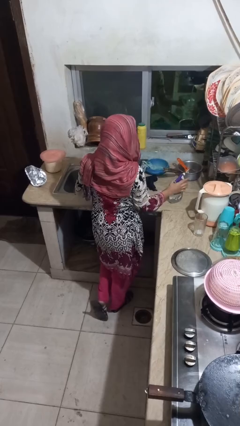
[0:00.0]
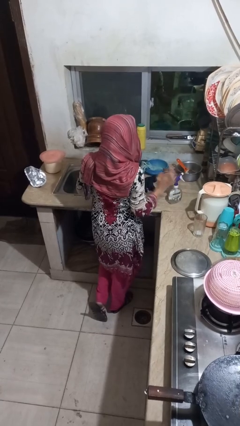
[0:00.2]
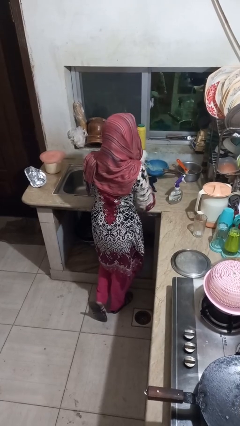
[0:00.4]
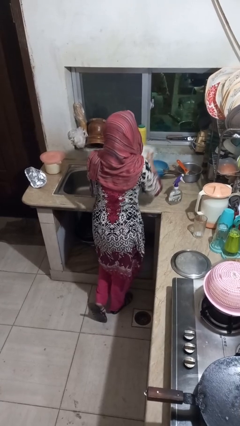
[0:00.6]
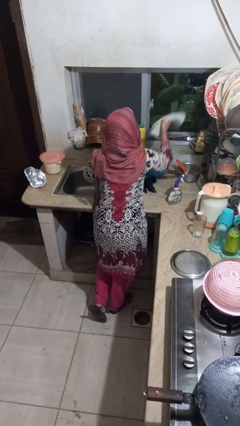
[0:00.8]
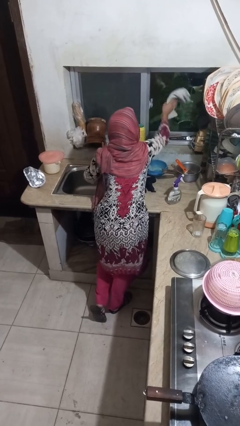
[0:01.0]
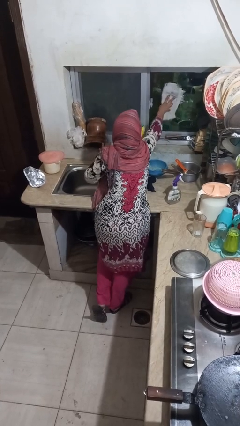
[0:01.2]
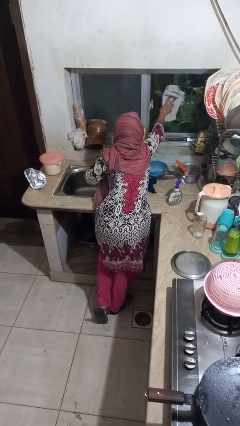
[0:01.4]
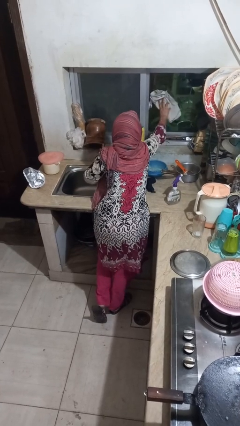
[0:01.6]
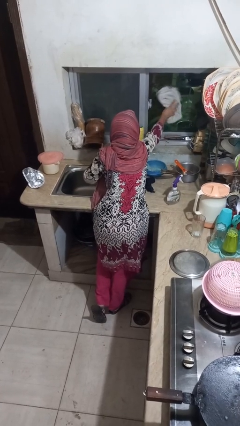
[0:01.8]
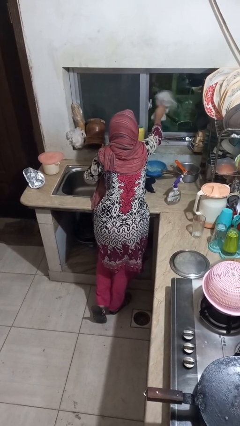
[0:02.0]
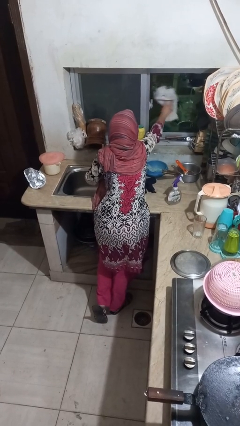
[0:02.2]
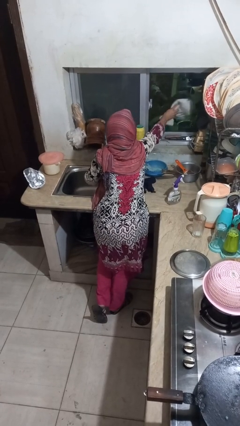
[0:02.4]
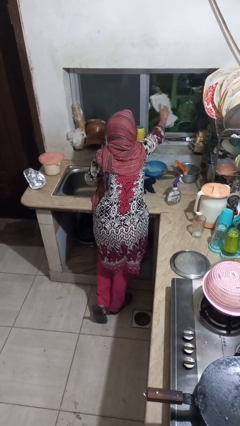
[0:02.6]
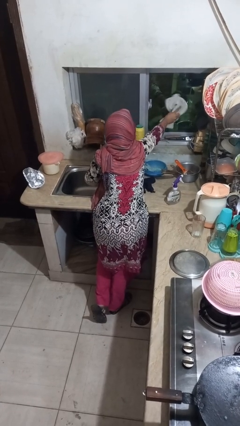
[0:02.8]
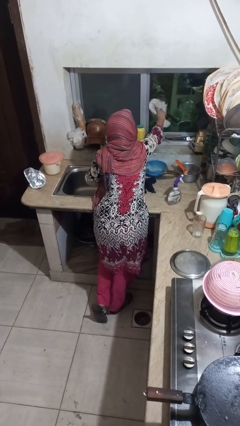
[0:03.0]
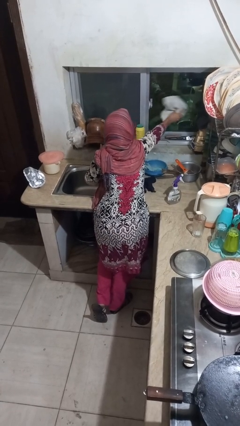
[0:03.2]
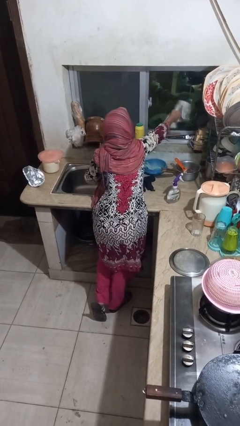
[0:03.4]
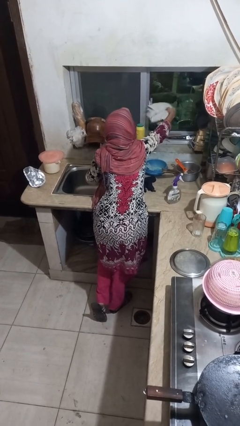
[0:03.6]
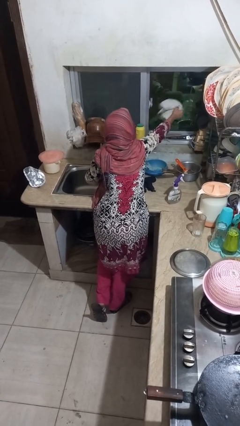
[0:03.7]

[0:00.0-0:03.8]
person washes window

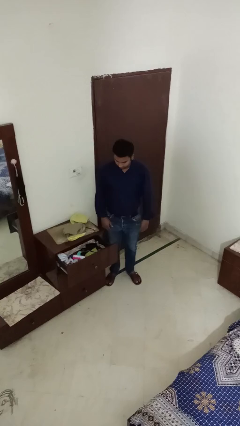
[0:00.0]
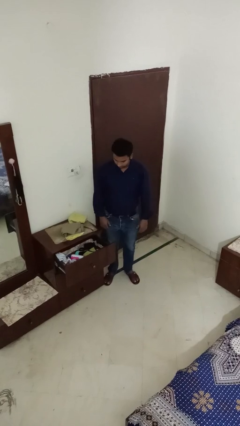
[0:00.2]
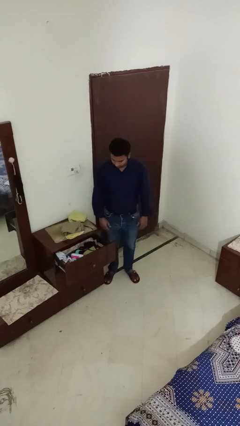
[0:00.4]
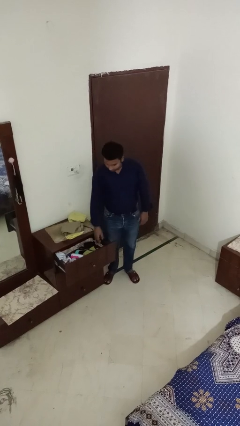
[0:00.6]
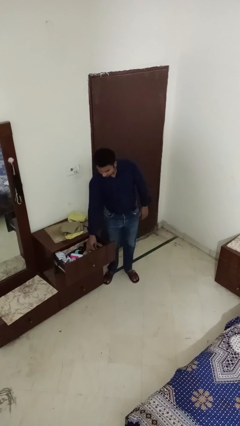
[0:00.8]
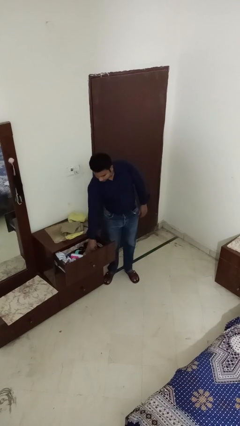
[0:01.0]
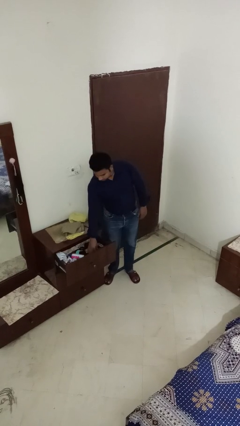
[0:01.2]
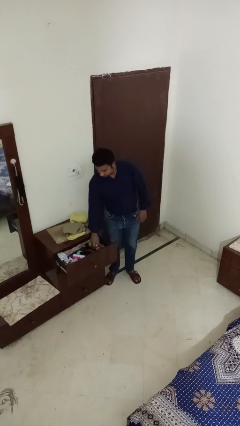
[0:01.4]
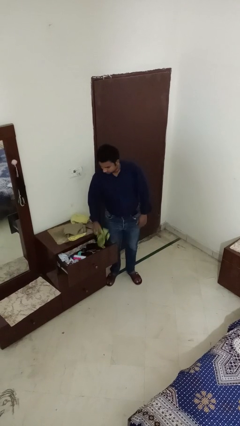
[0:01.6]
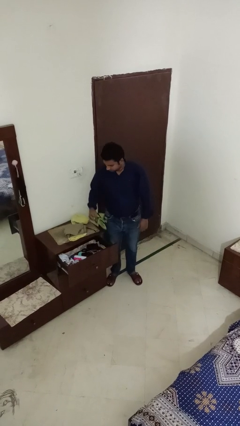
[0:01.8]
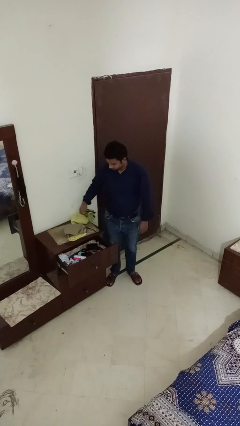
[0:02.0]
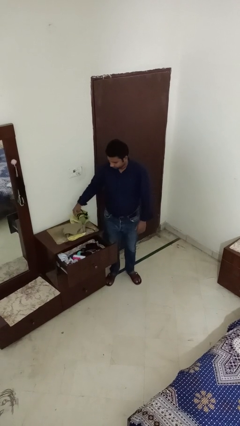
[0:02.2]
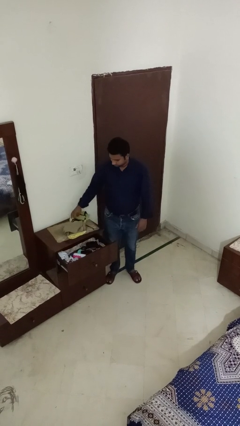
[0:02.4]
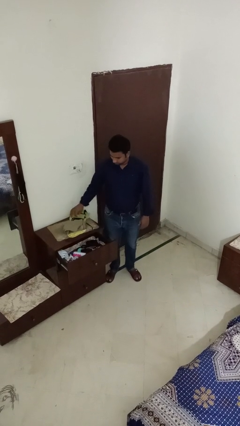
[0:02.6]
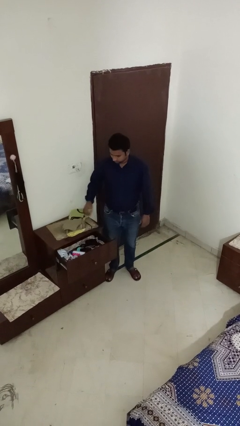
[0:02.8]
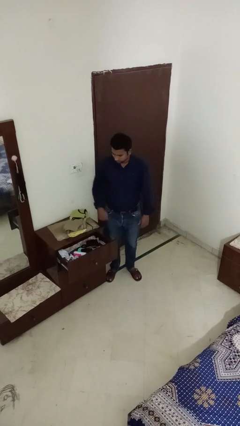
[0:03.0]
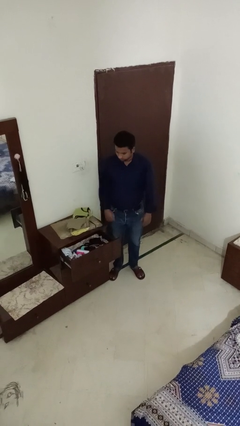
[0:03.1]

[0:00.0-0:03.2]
person takes clothes from dresser

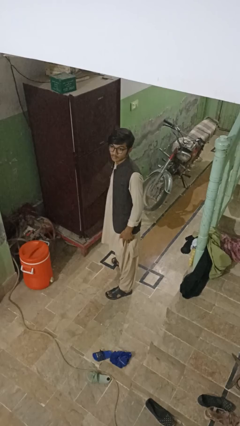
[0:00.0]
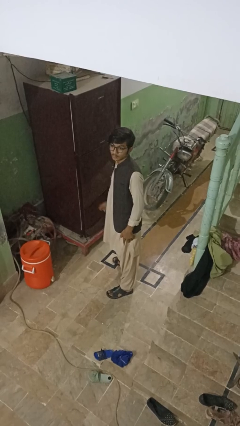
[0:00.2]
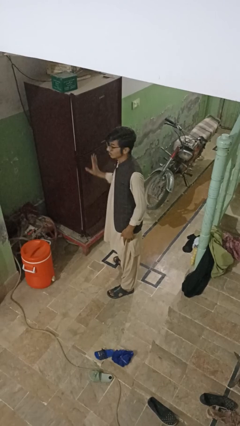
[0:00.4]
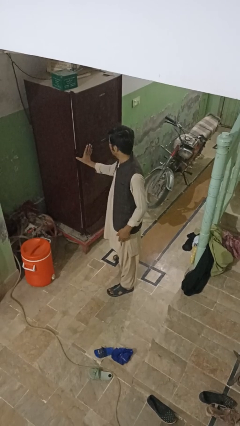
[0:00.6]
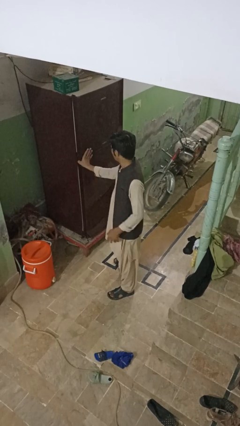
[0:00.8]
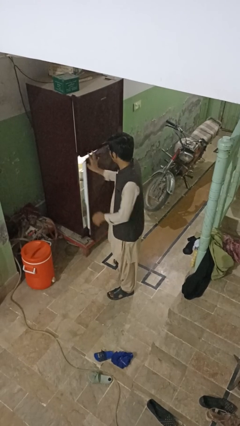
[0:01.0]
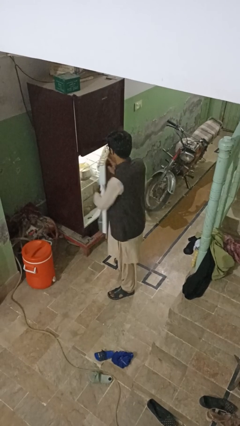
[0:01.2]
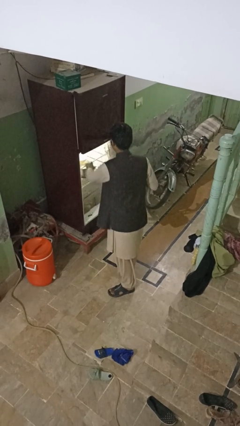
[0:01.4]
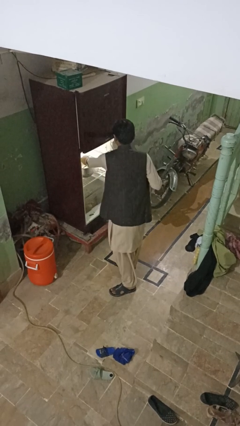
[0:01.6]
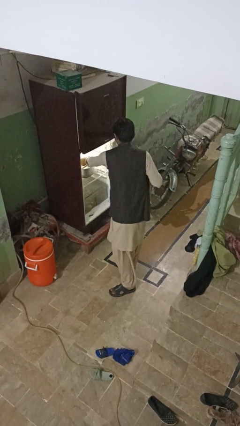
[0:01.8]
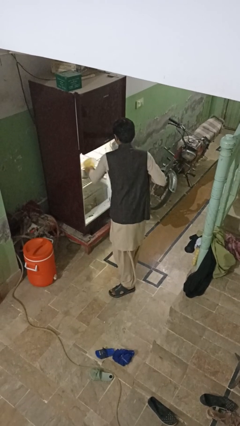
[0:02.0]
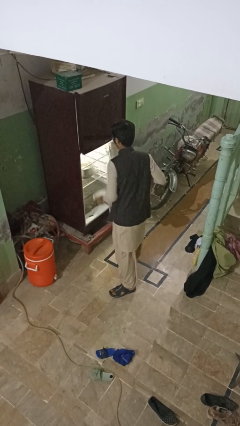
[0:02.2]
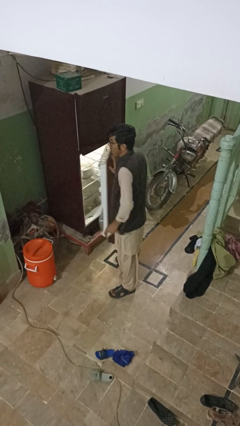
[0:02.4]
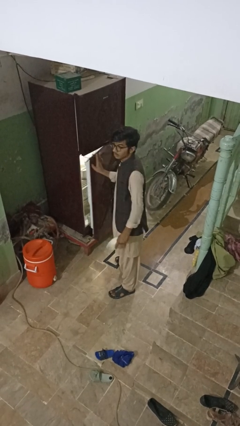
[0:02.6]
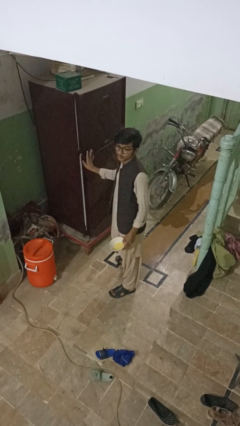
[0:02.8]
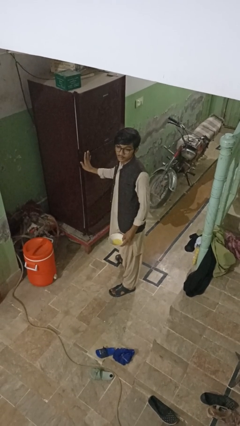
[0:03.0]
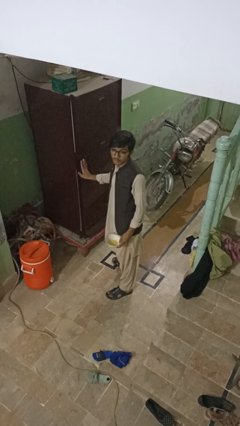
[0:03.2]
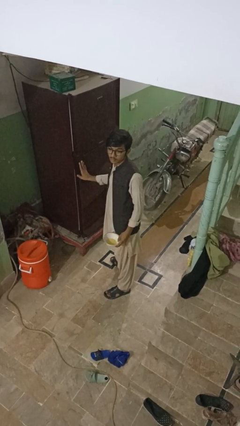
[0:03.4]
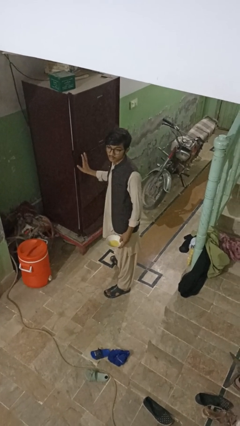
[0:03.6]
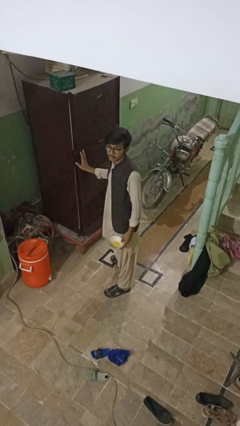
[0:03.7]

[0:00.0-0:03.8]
person takes object from refrigerator

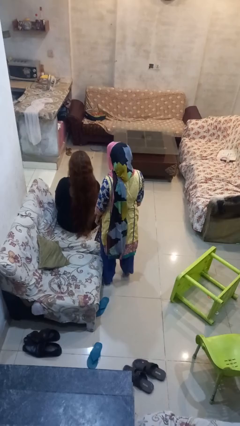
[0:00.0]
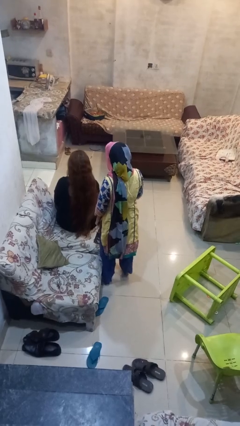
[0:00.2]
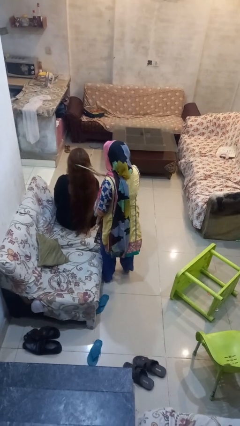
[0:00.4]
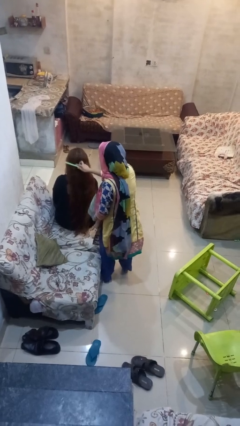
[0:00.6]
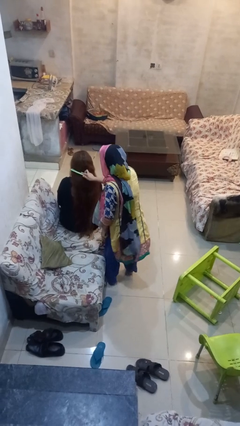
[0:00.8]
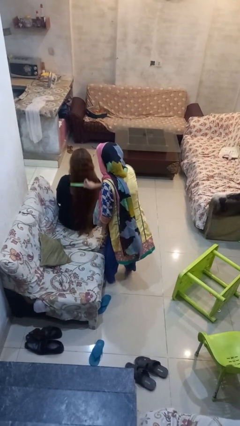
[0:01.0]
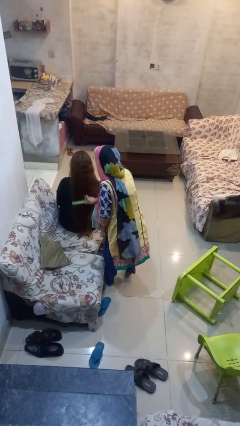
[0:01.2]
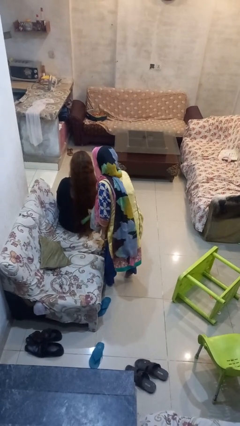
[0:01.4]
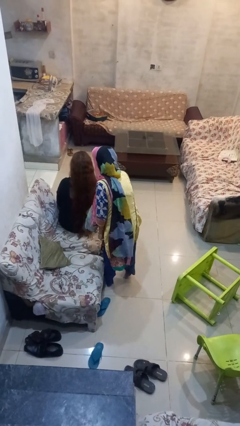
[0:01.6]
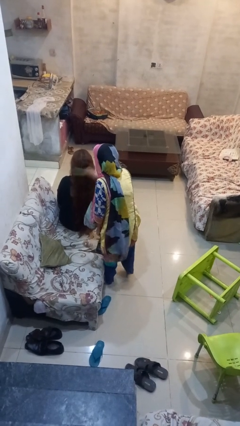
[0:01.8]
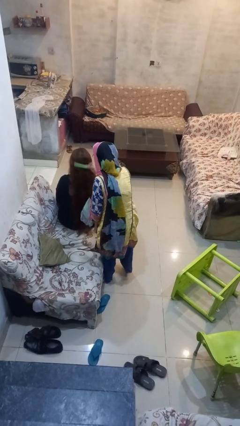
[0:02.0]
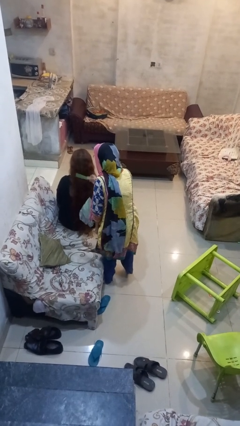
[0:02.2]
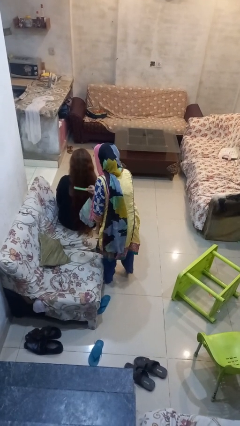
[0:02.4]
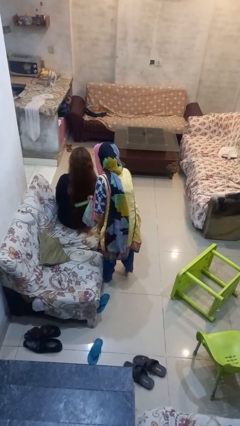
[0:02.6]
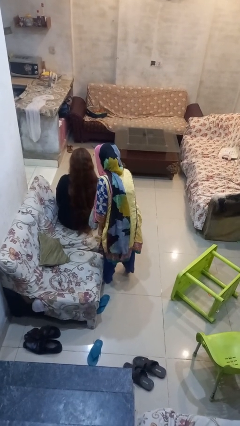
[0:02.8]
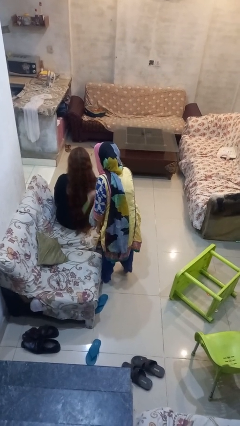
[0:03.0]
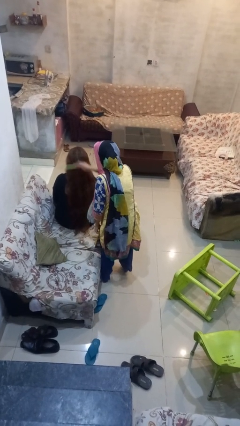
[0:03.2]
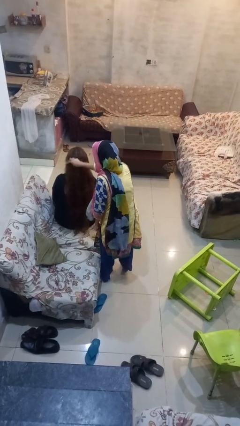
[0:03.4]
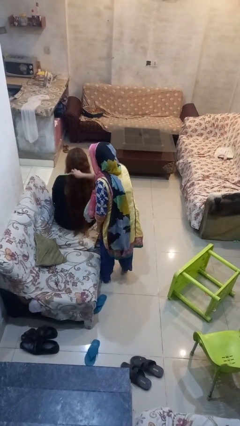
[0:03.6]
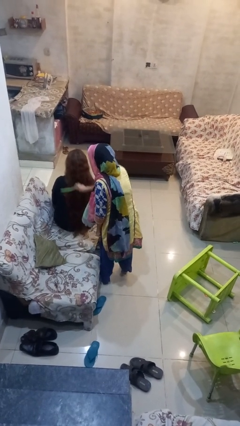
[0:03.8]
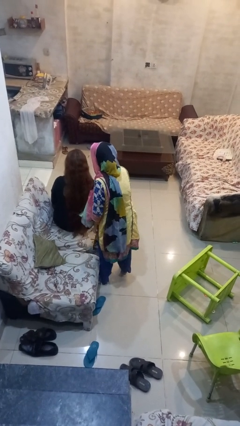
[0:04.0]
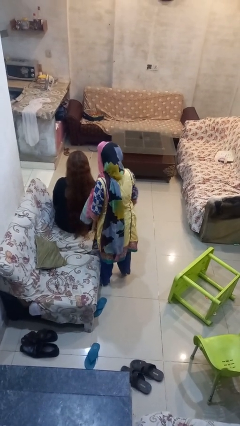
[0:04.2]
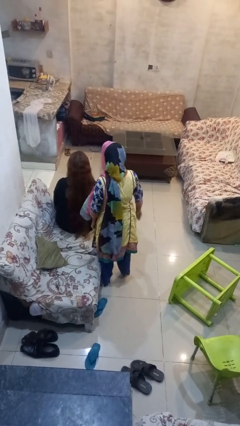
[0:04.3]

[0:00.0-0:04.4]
person brushes hair of person

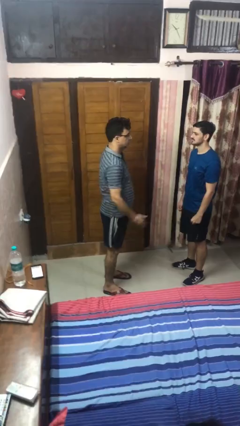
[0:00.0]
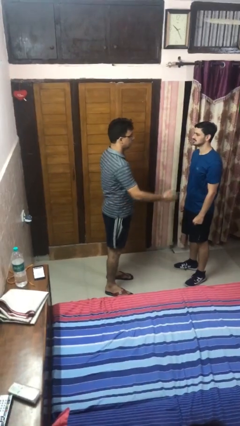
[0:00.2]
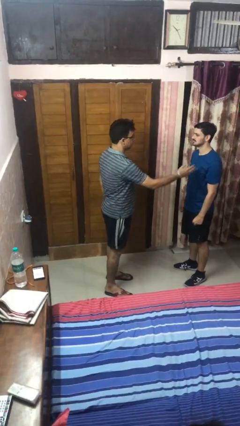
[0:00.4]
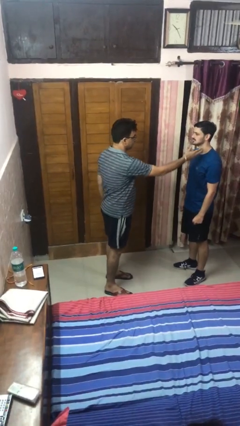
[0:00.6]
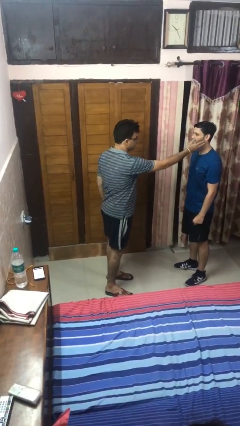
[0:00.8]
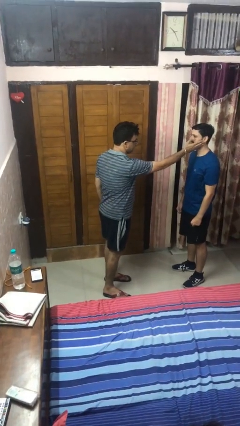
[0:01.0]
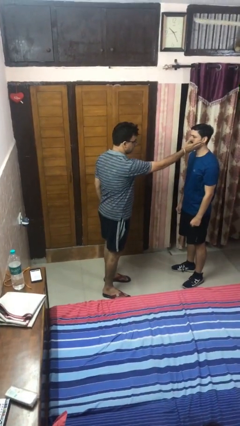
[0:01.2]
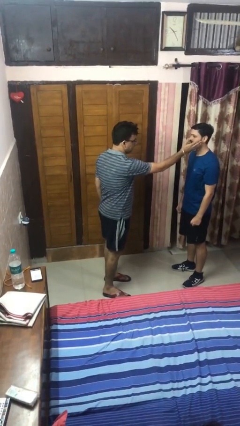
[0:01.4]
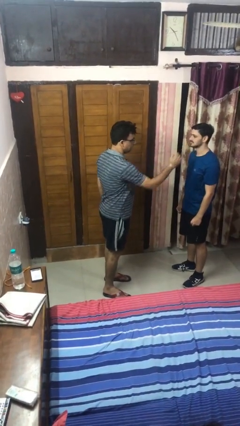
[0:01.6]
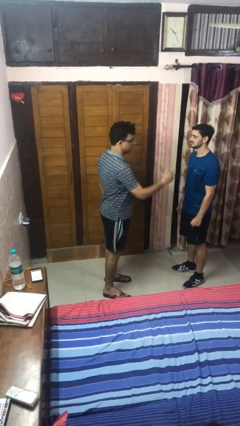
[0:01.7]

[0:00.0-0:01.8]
person touches face of person

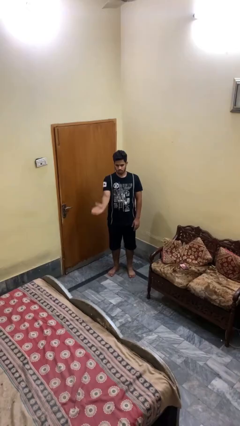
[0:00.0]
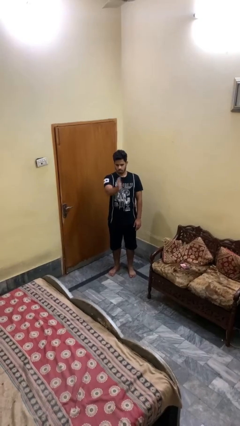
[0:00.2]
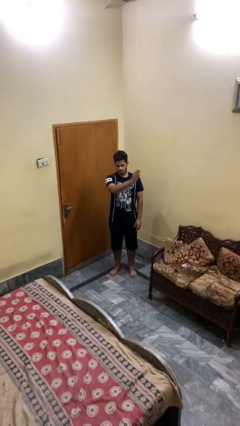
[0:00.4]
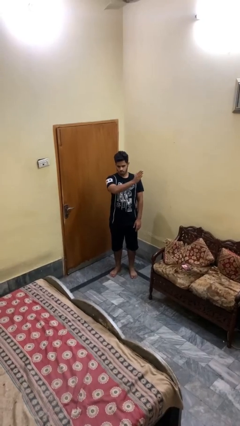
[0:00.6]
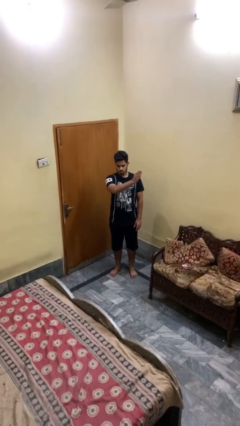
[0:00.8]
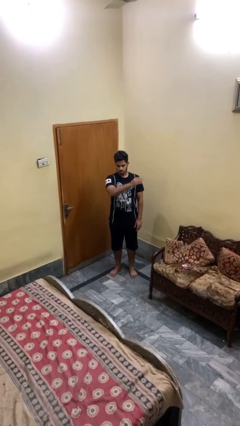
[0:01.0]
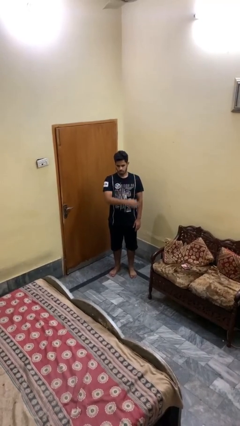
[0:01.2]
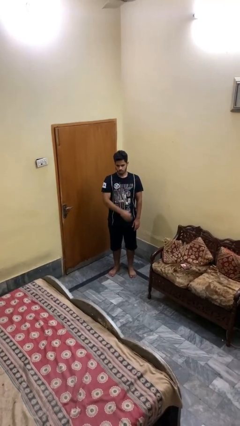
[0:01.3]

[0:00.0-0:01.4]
person gestures swipe left
